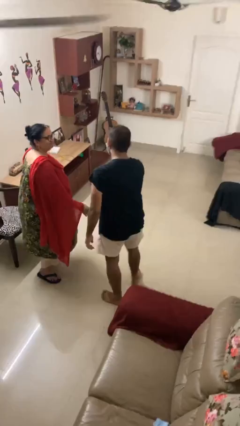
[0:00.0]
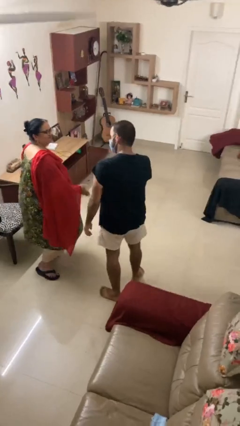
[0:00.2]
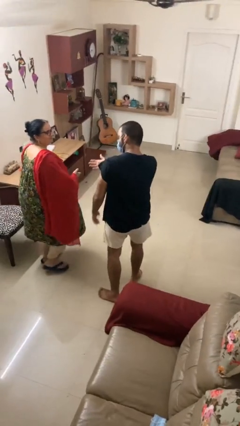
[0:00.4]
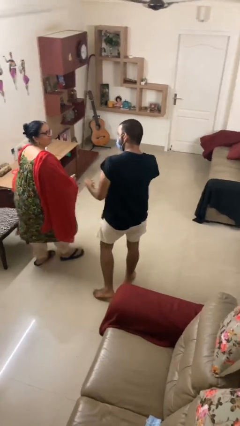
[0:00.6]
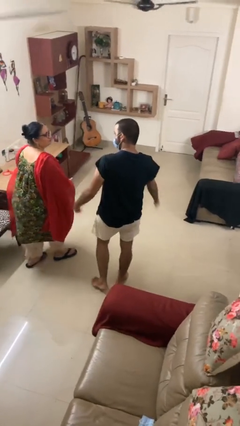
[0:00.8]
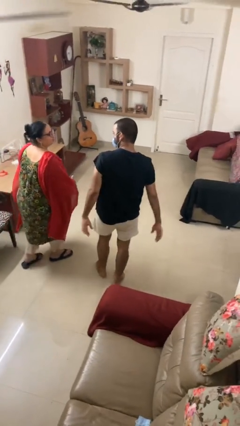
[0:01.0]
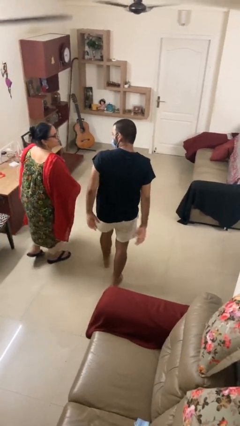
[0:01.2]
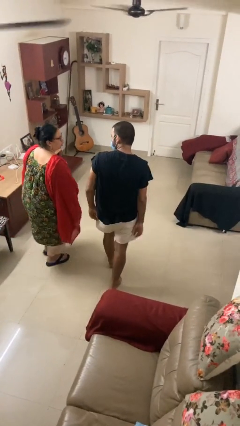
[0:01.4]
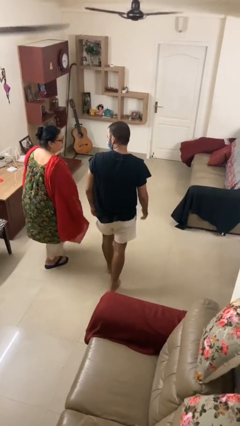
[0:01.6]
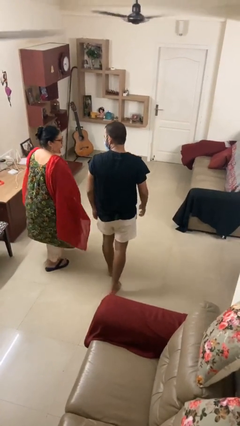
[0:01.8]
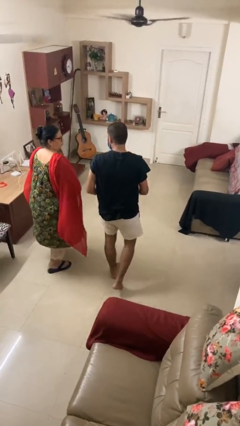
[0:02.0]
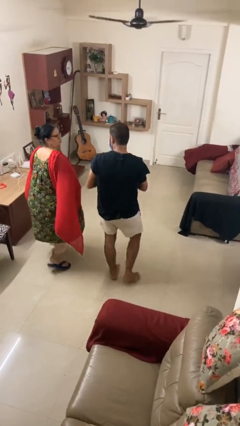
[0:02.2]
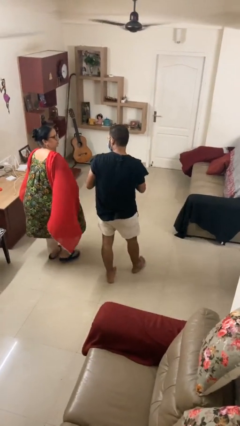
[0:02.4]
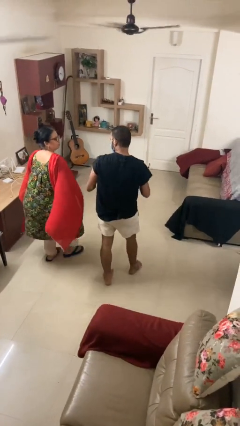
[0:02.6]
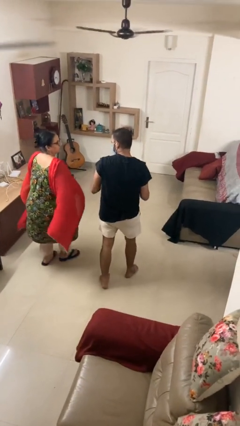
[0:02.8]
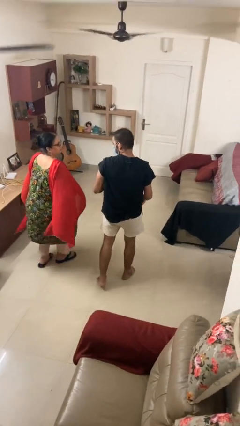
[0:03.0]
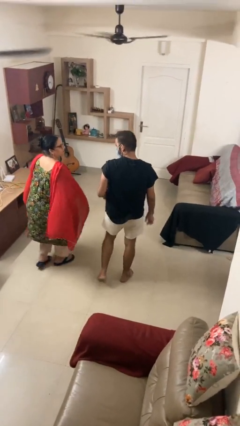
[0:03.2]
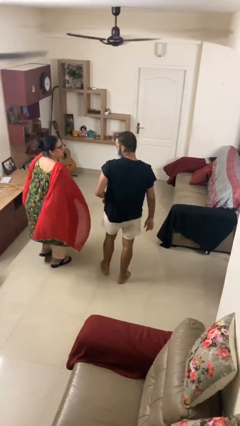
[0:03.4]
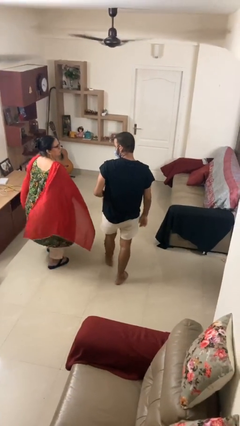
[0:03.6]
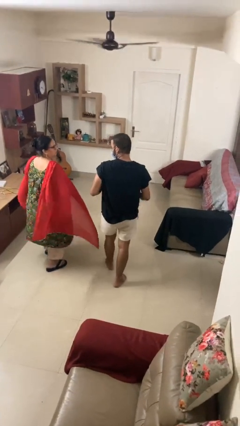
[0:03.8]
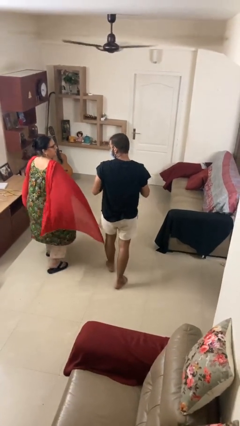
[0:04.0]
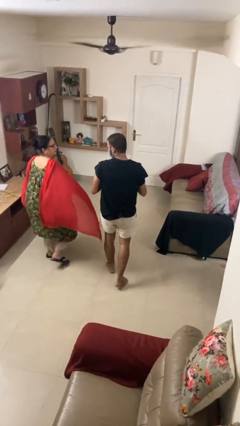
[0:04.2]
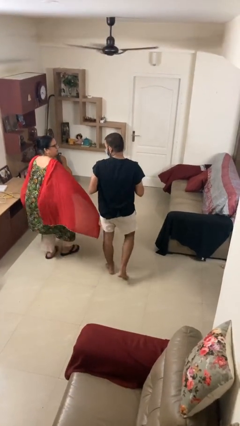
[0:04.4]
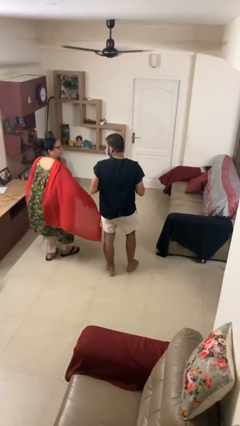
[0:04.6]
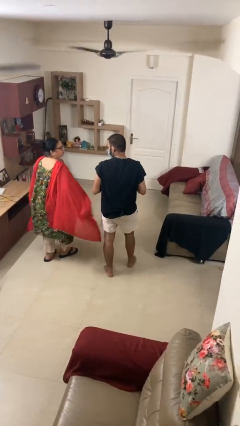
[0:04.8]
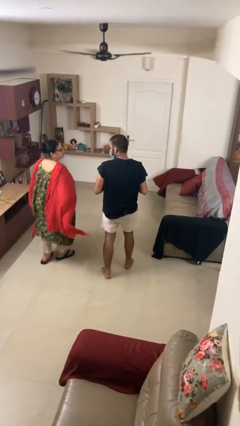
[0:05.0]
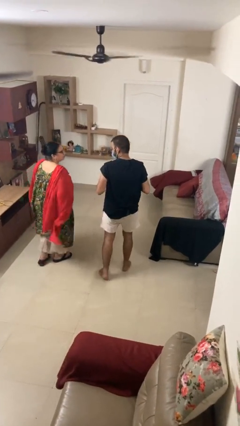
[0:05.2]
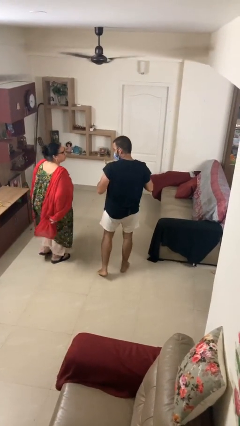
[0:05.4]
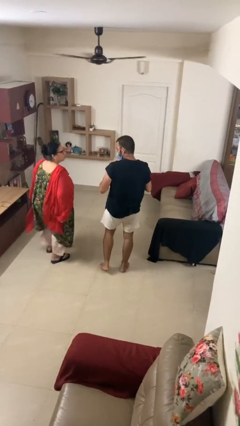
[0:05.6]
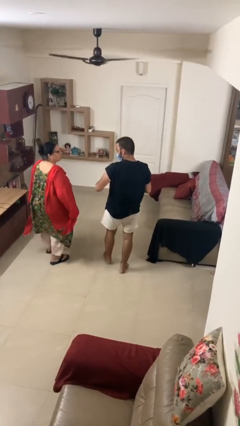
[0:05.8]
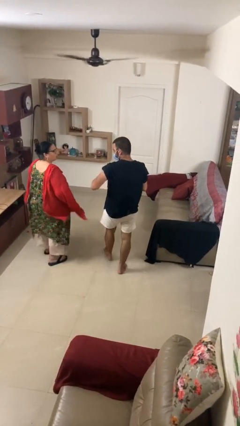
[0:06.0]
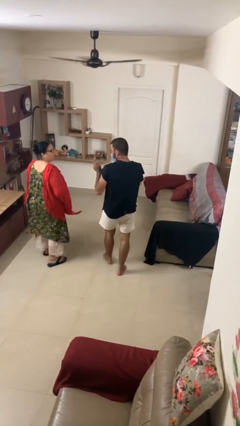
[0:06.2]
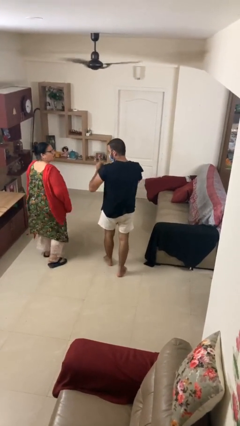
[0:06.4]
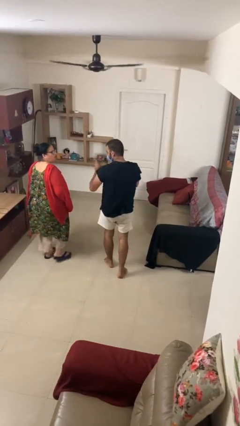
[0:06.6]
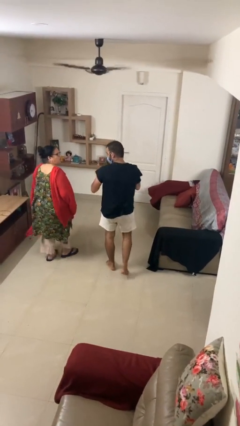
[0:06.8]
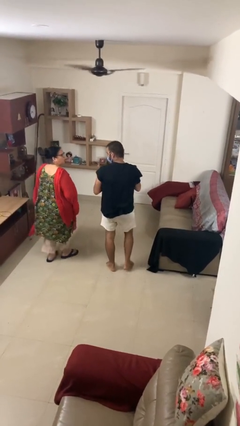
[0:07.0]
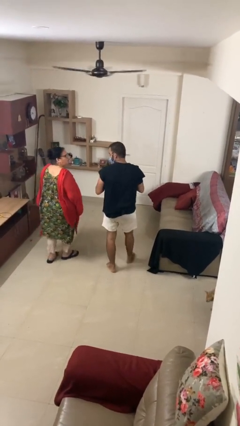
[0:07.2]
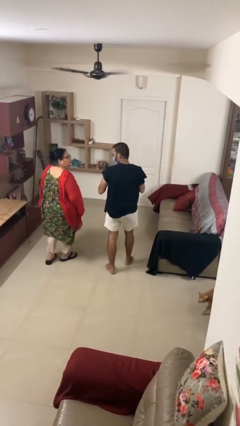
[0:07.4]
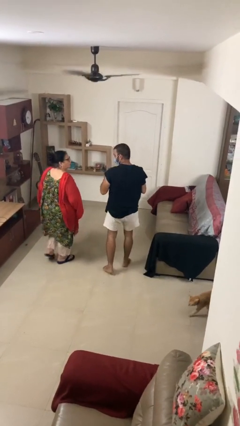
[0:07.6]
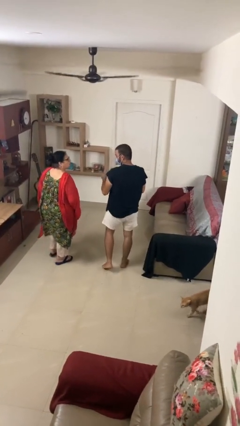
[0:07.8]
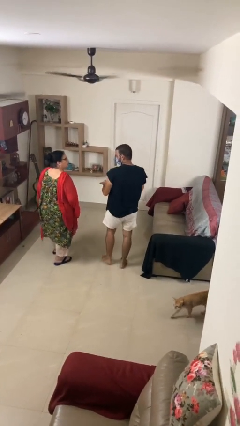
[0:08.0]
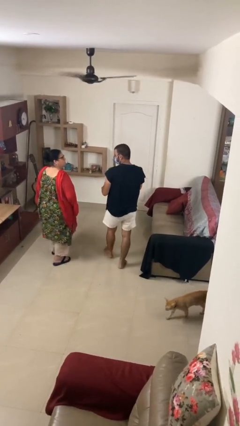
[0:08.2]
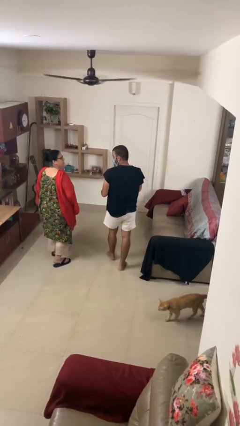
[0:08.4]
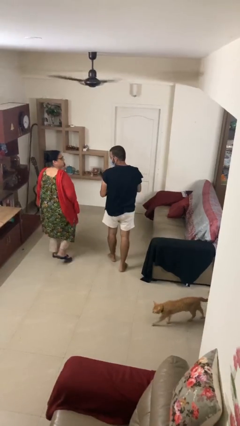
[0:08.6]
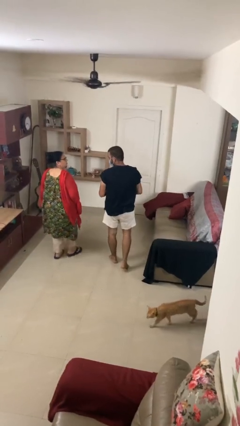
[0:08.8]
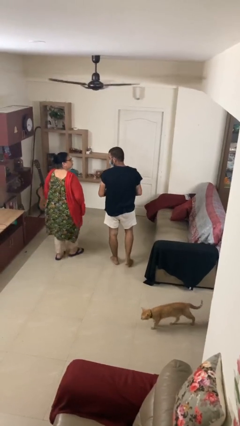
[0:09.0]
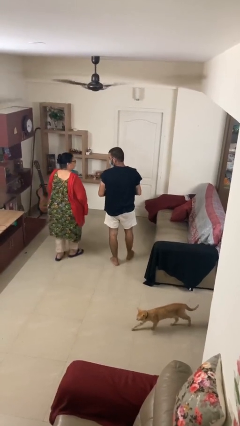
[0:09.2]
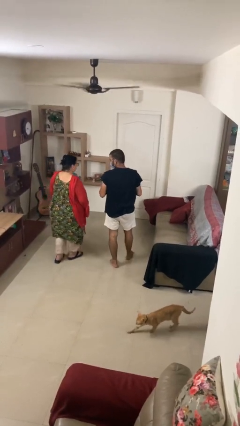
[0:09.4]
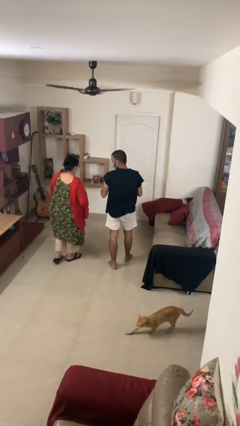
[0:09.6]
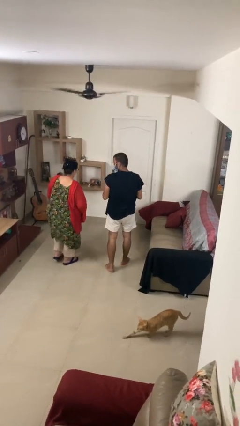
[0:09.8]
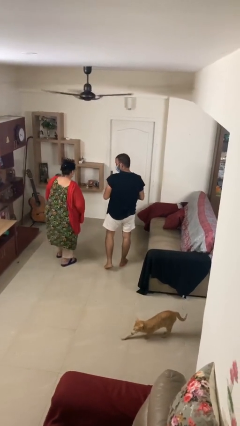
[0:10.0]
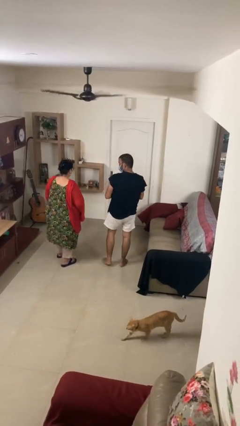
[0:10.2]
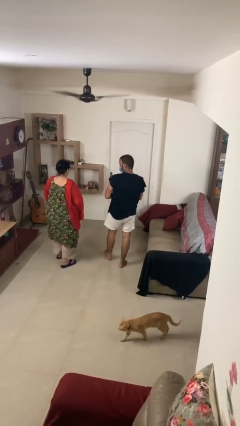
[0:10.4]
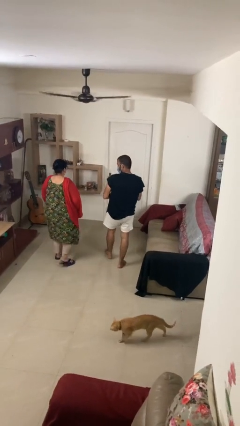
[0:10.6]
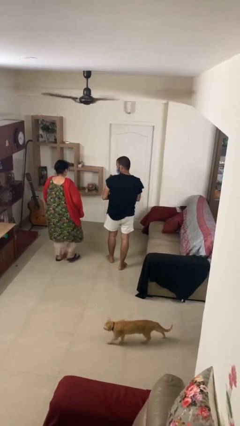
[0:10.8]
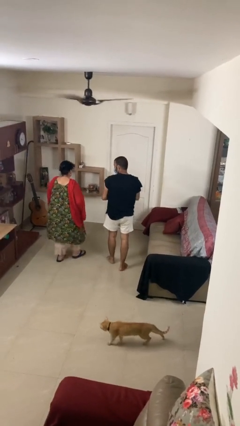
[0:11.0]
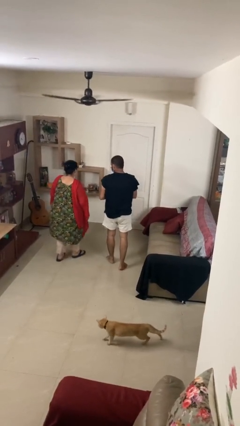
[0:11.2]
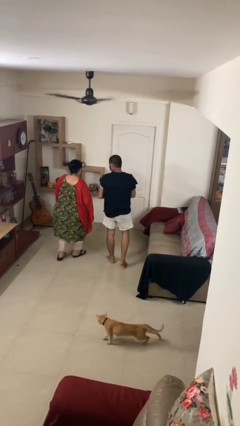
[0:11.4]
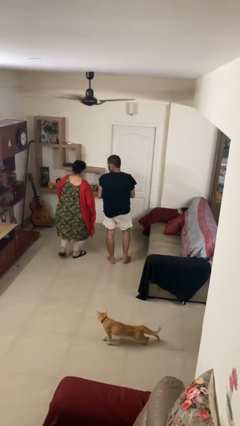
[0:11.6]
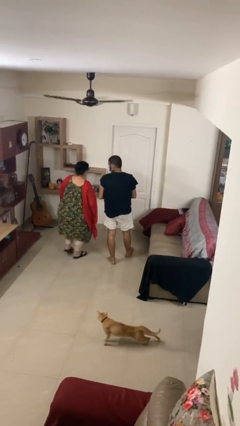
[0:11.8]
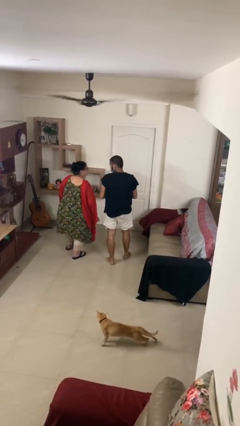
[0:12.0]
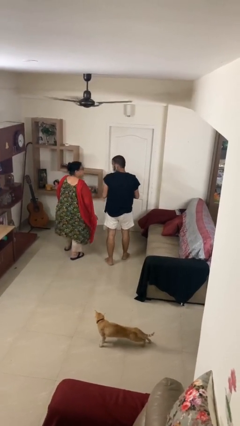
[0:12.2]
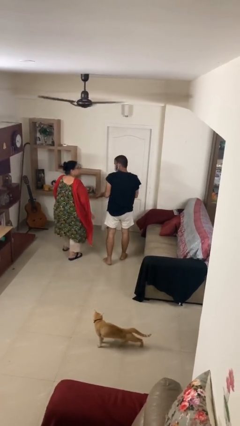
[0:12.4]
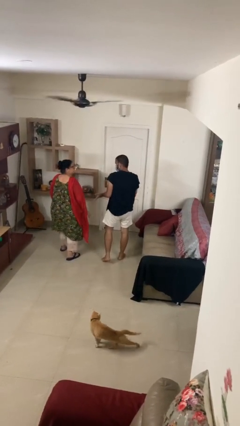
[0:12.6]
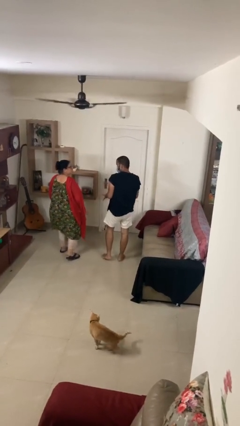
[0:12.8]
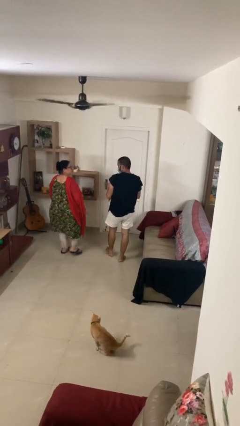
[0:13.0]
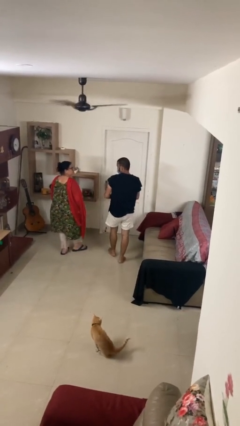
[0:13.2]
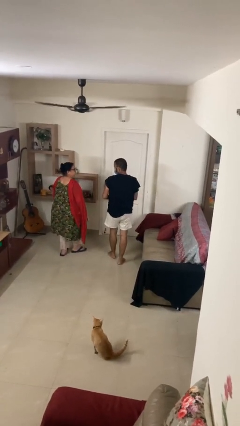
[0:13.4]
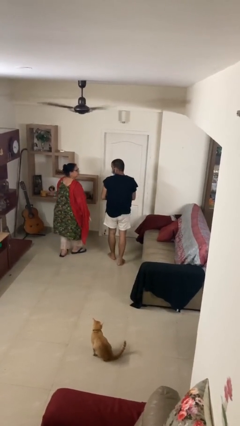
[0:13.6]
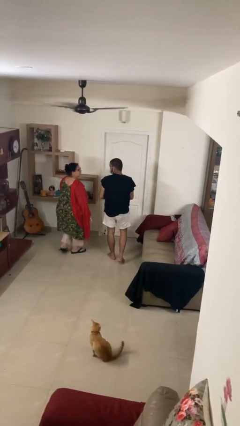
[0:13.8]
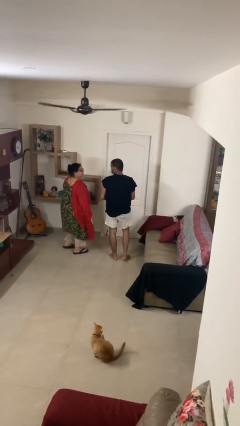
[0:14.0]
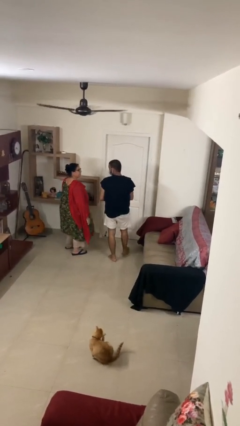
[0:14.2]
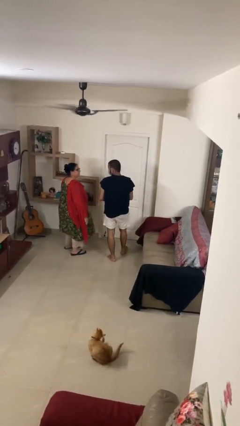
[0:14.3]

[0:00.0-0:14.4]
person talks to person

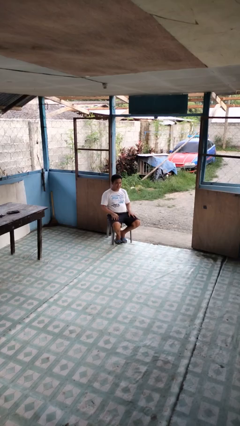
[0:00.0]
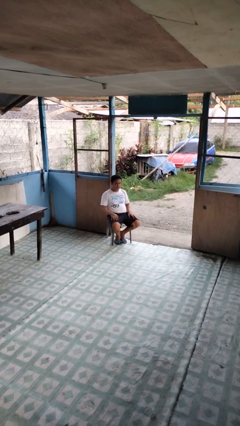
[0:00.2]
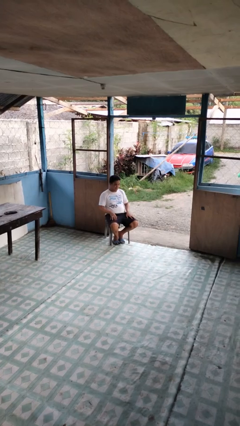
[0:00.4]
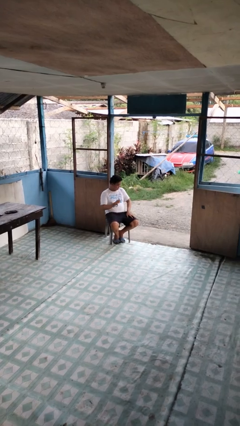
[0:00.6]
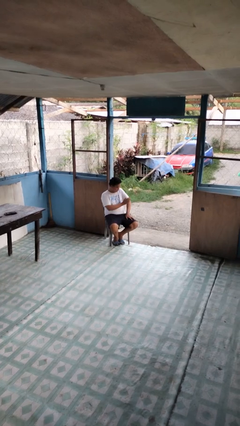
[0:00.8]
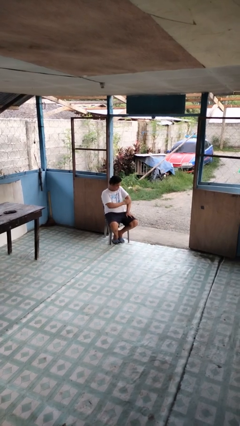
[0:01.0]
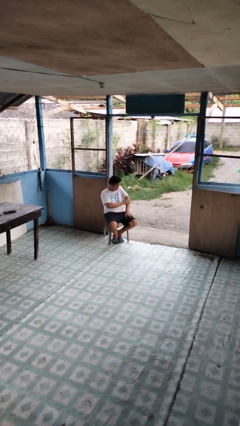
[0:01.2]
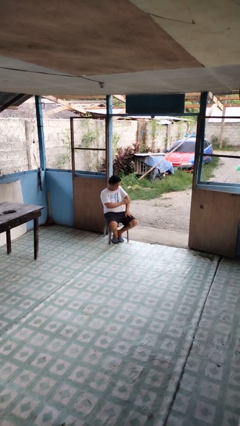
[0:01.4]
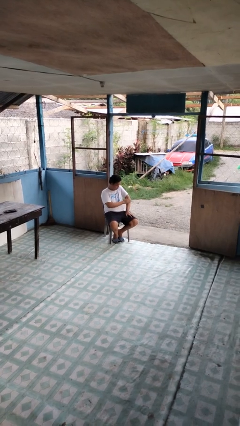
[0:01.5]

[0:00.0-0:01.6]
person swats bug

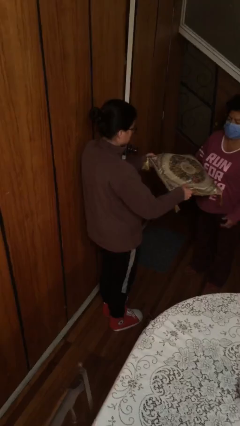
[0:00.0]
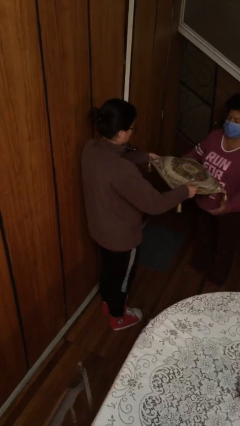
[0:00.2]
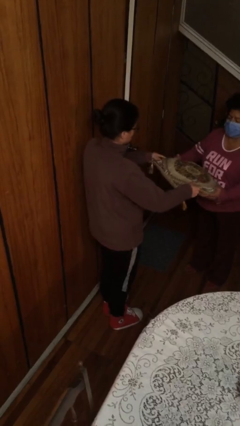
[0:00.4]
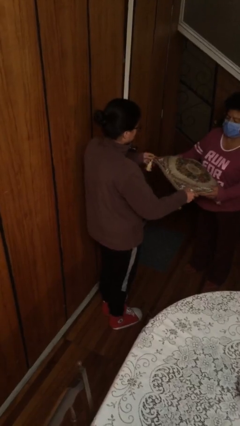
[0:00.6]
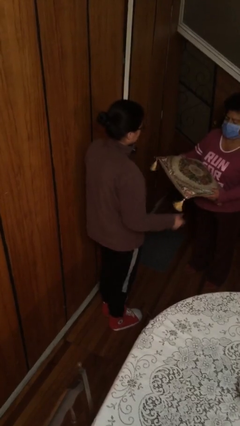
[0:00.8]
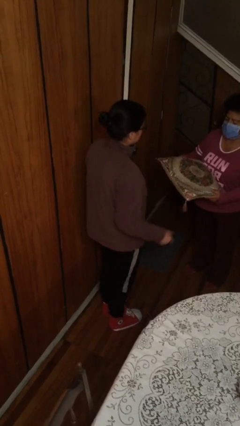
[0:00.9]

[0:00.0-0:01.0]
person transfers object to person

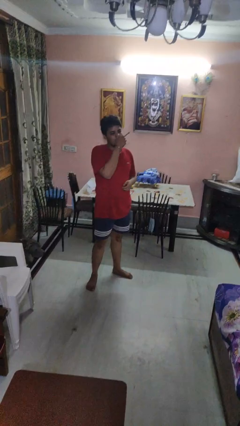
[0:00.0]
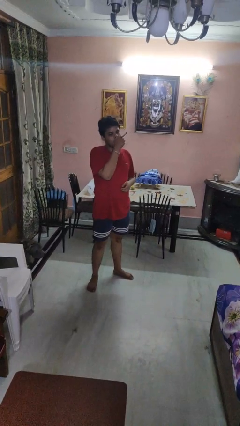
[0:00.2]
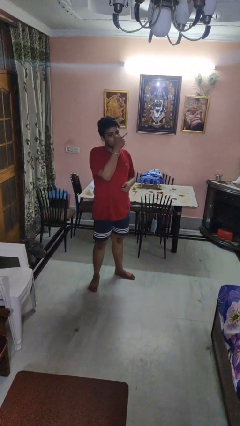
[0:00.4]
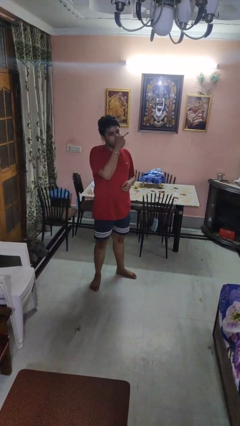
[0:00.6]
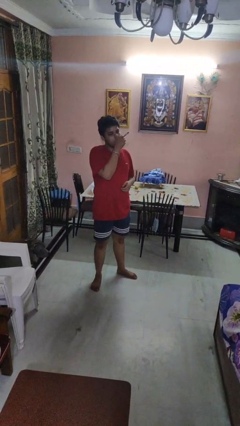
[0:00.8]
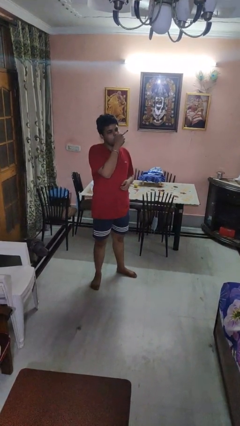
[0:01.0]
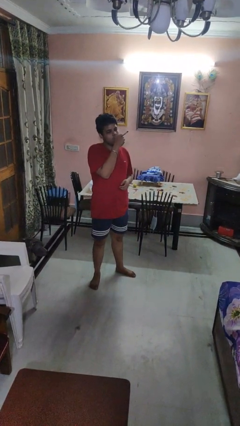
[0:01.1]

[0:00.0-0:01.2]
person vapes
